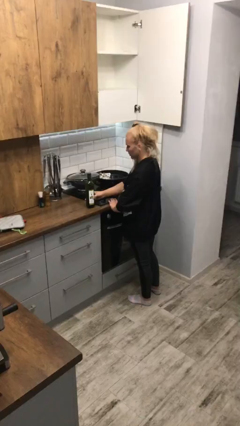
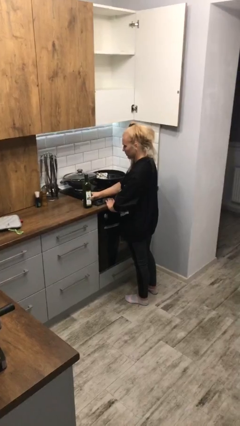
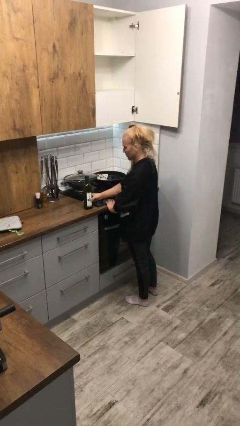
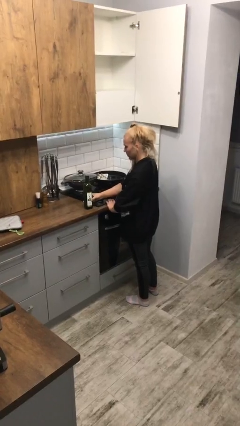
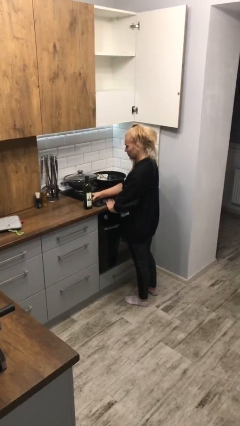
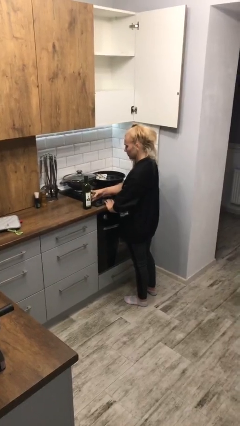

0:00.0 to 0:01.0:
person puts down object on table

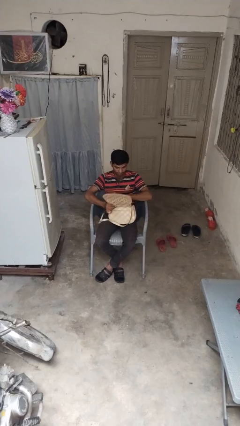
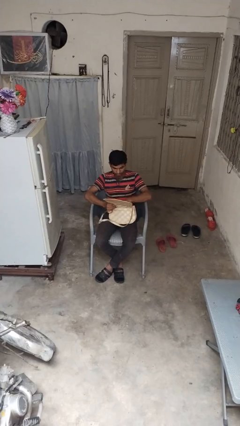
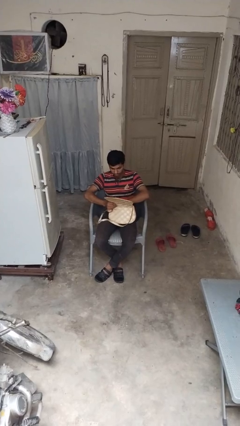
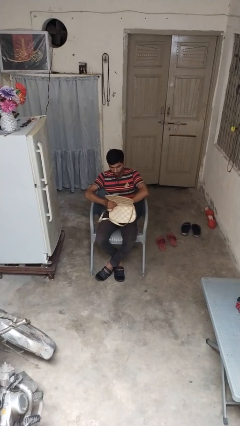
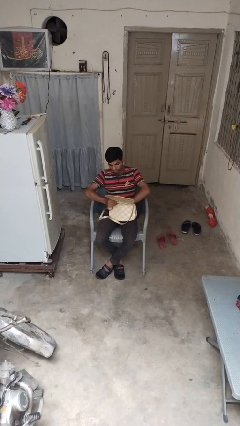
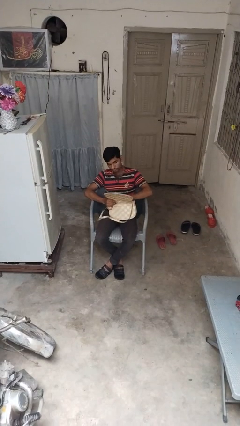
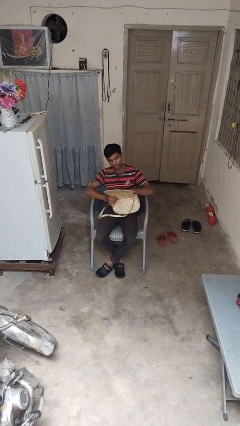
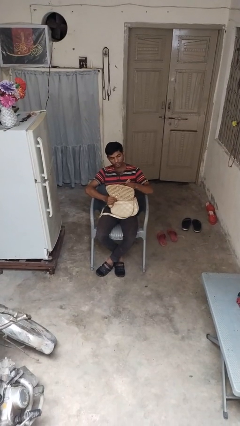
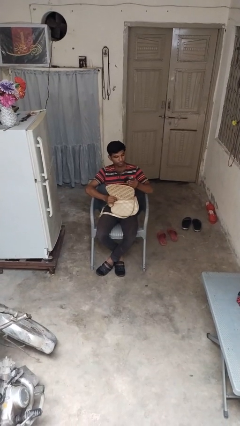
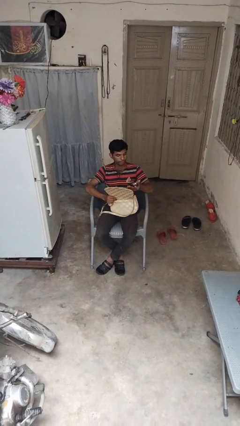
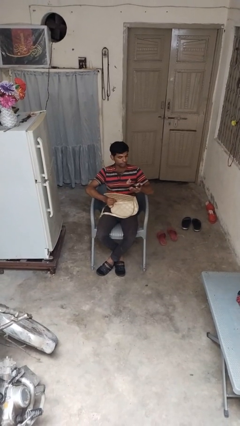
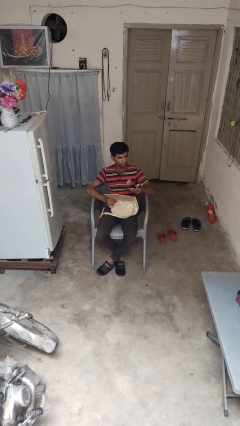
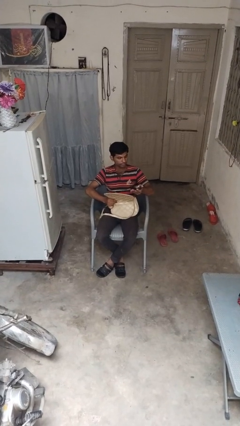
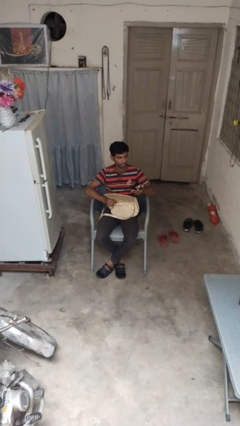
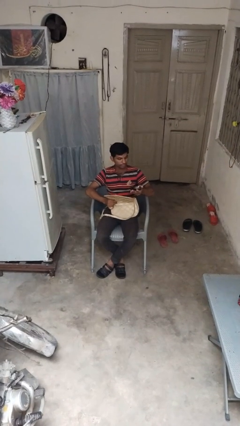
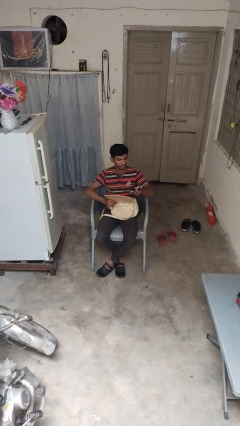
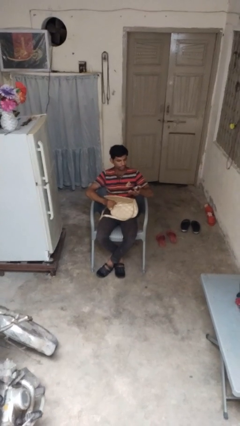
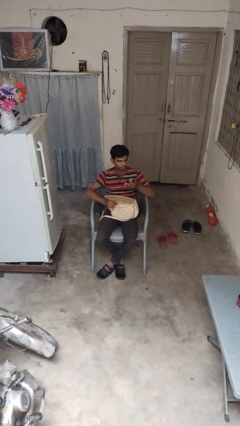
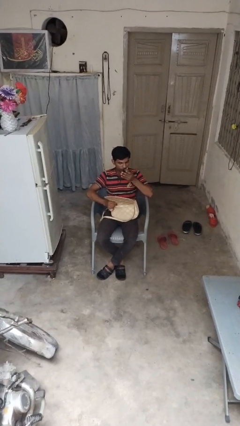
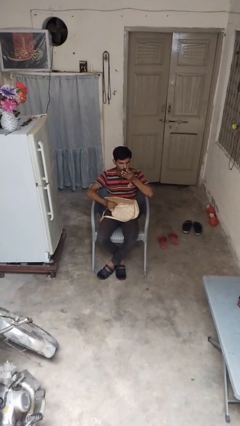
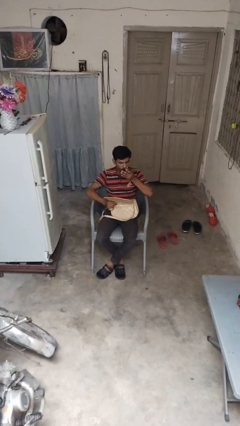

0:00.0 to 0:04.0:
person takes object from purse

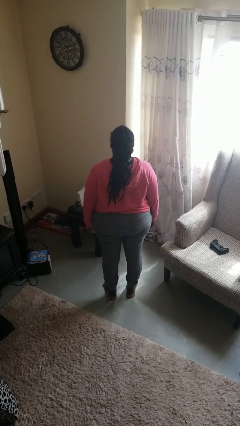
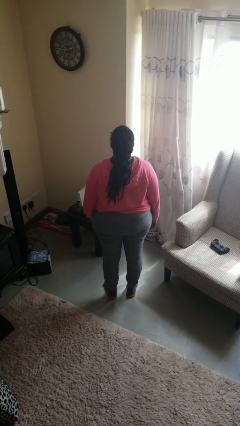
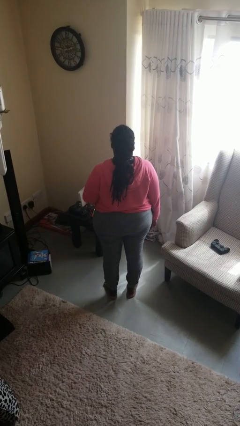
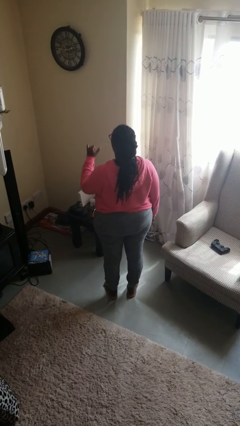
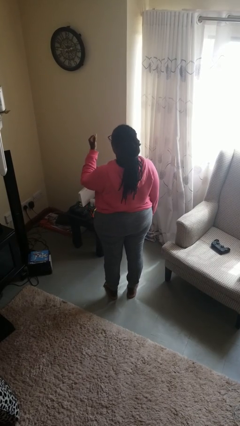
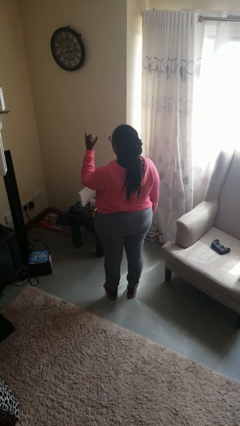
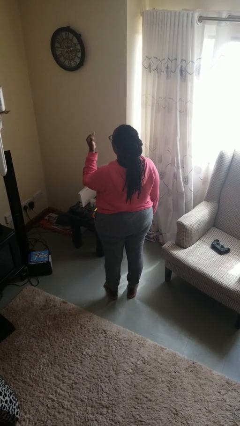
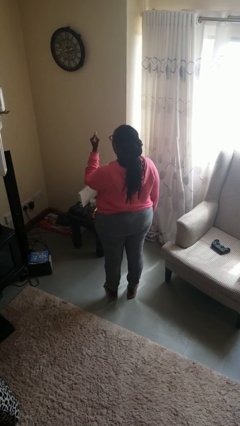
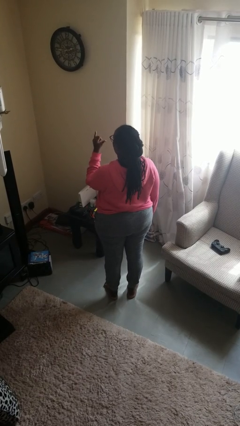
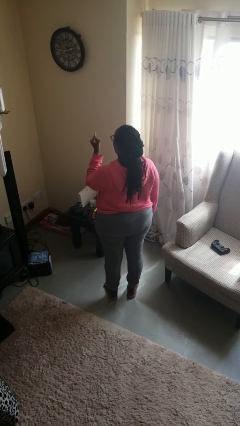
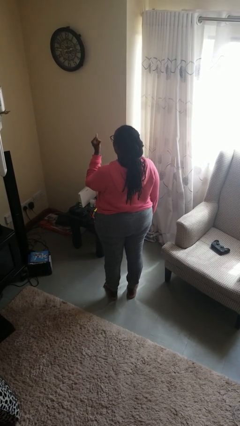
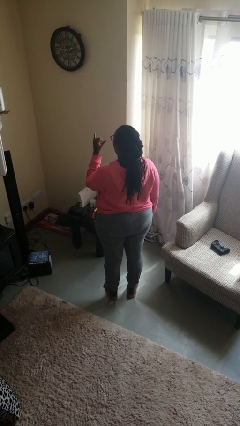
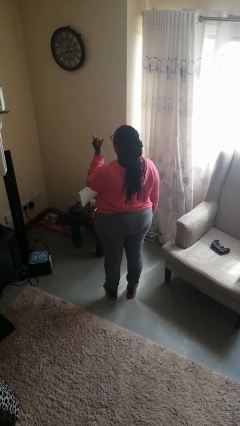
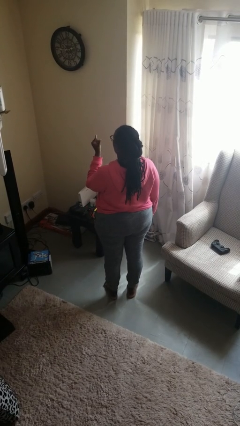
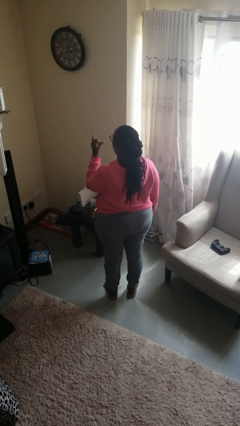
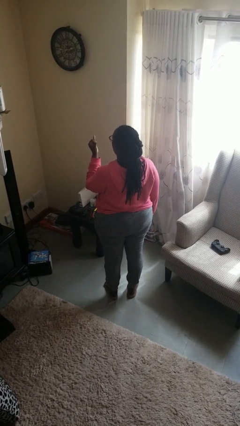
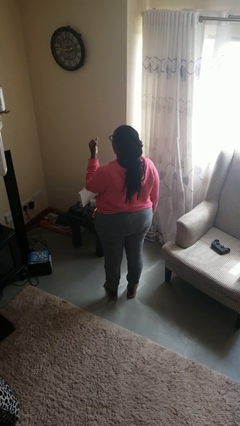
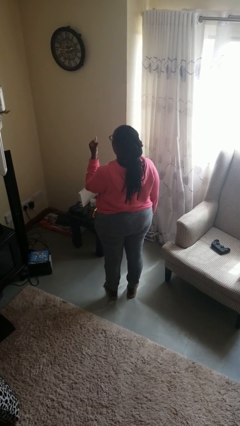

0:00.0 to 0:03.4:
person gestures hang loose

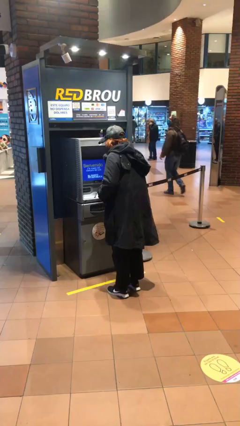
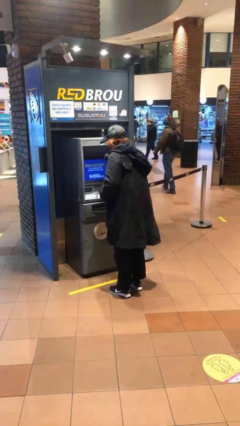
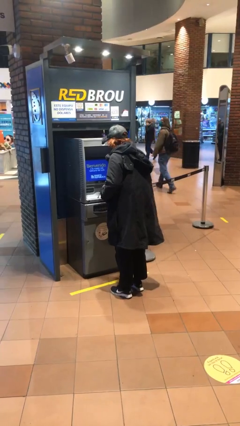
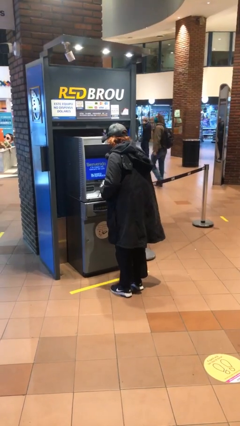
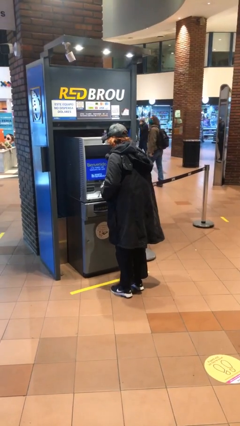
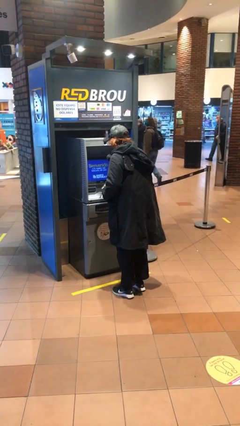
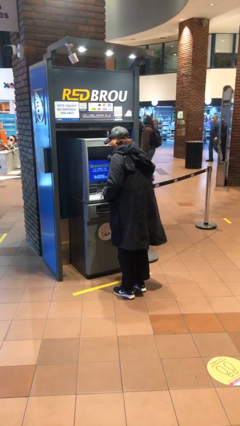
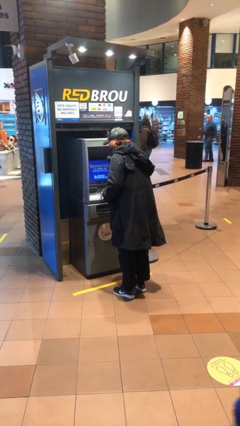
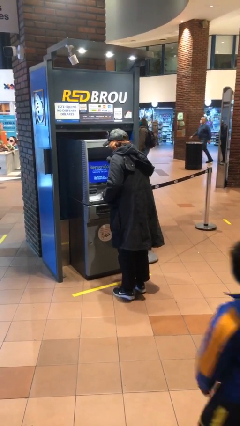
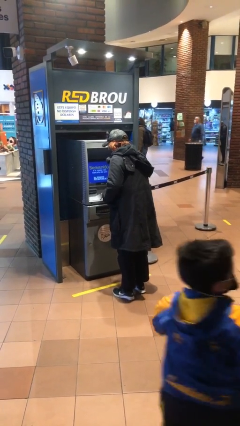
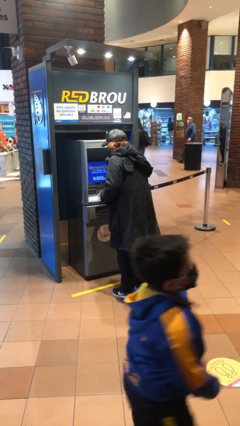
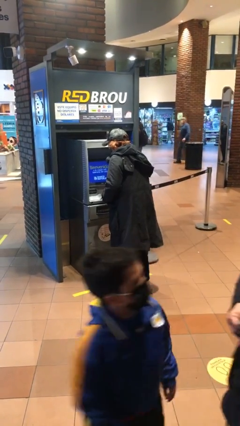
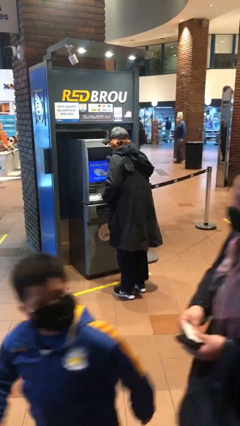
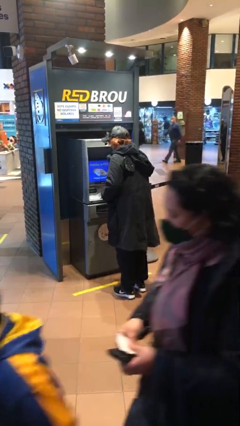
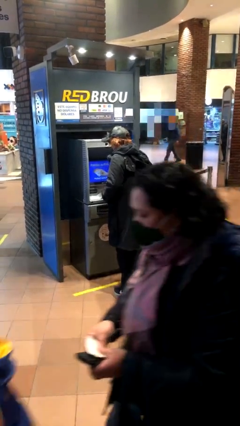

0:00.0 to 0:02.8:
person purchases from machine

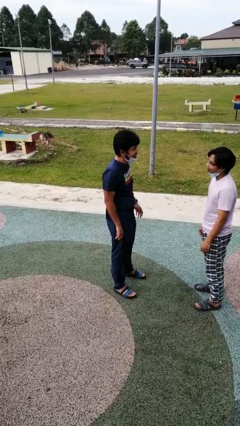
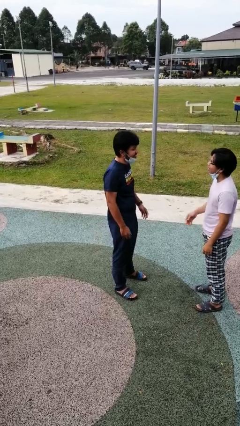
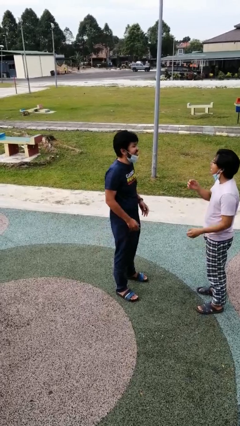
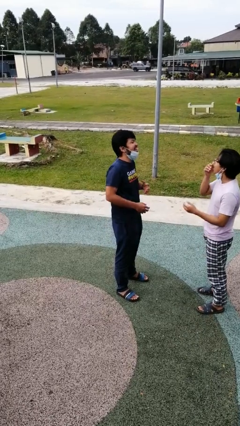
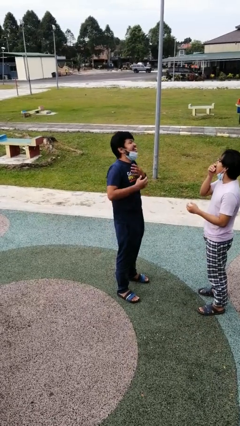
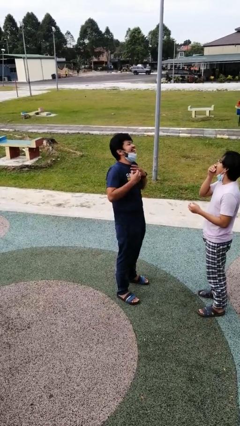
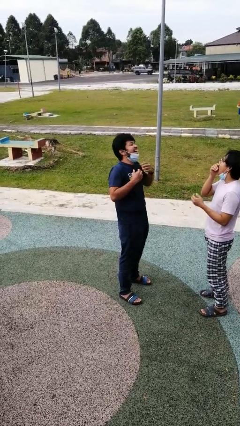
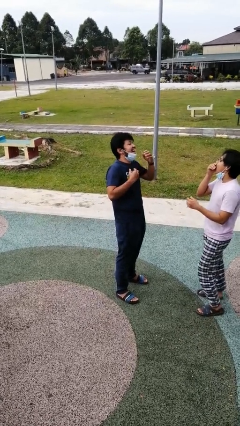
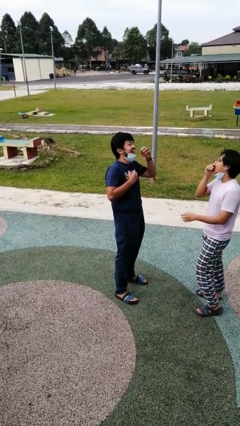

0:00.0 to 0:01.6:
person laughs with person

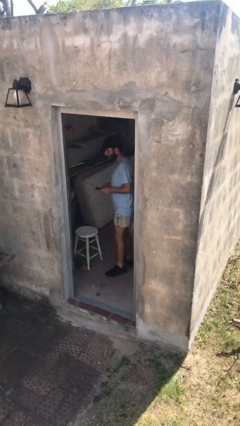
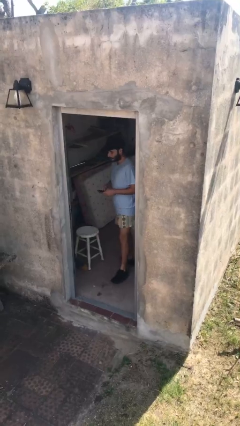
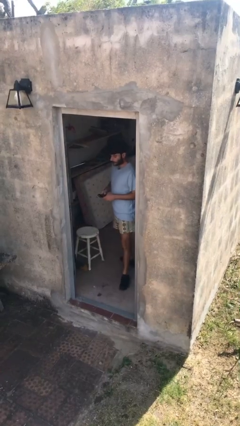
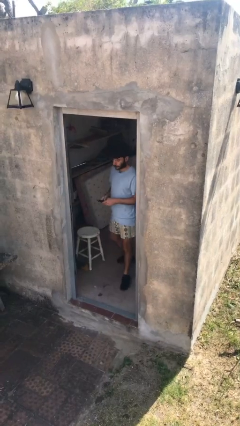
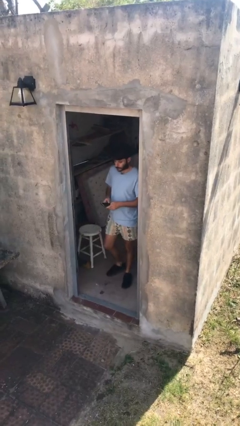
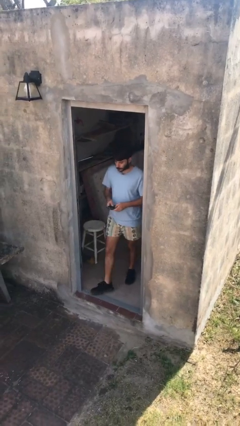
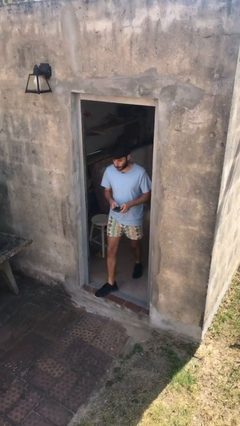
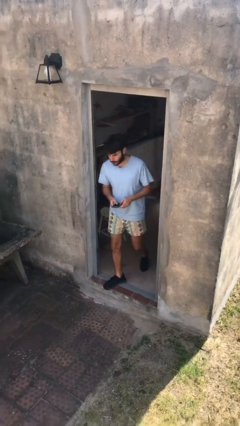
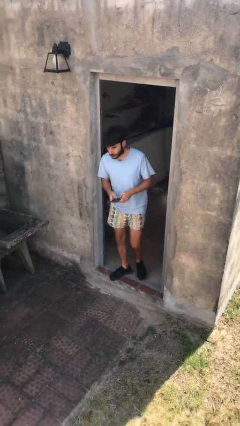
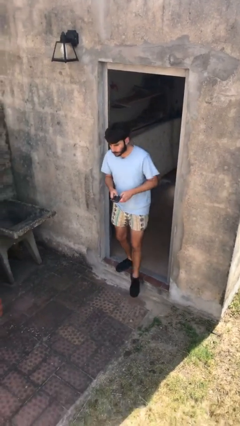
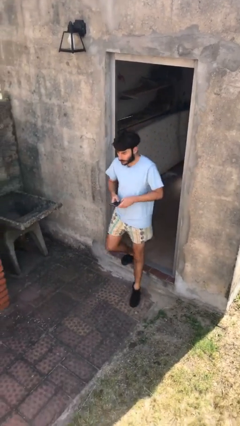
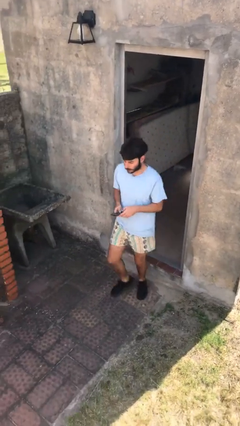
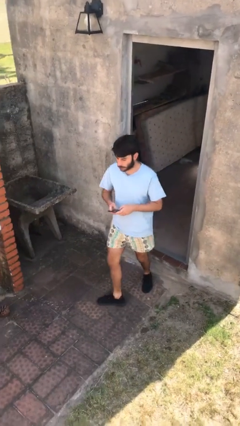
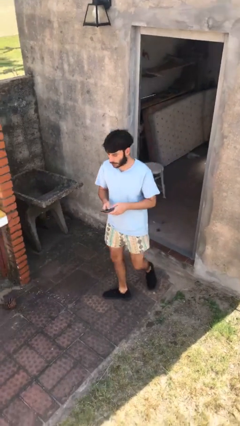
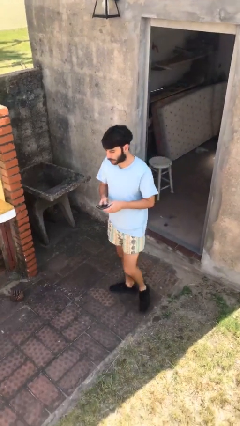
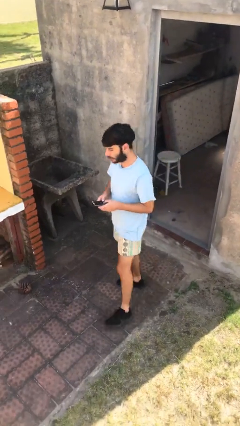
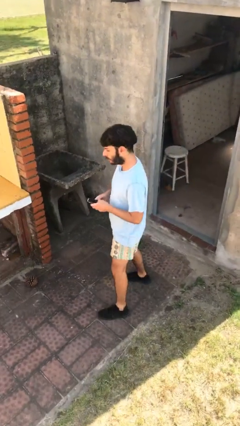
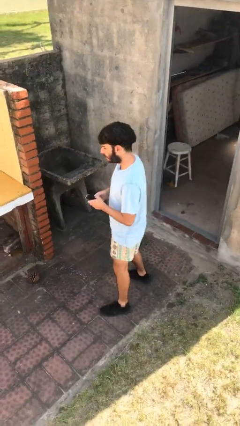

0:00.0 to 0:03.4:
person enters scene through structure

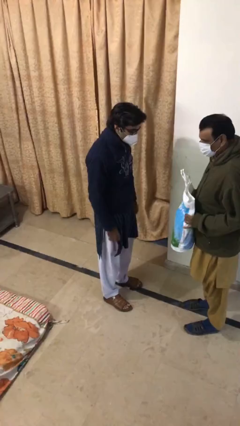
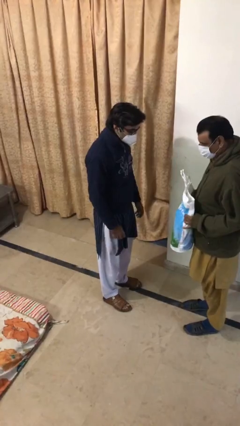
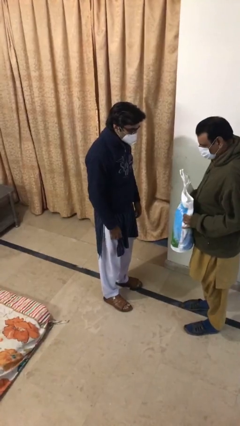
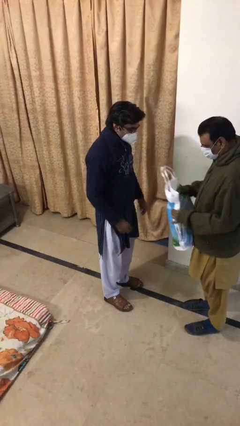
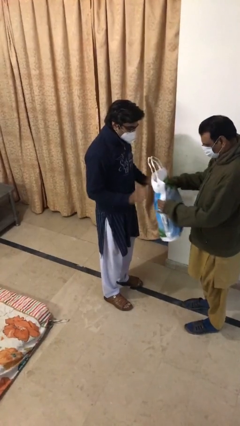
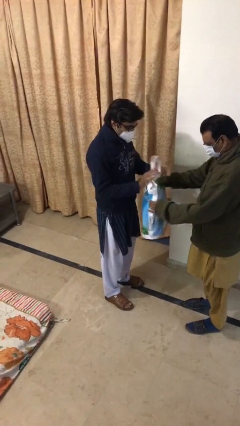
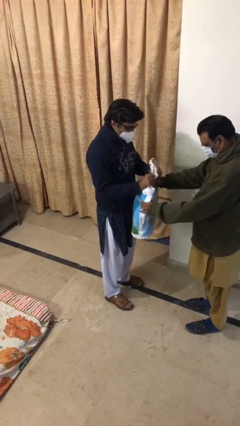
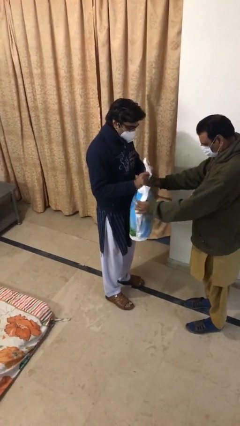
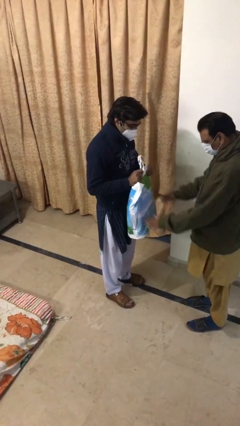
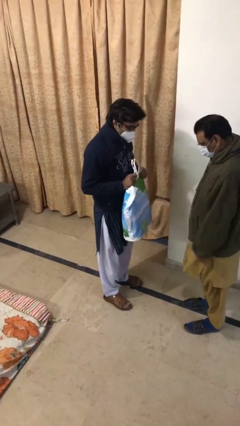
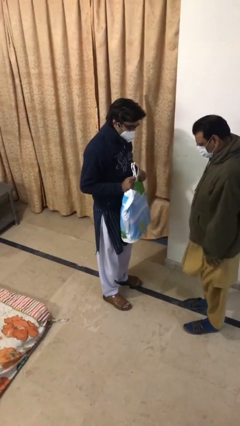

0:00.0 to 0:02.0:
person transfers object to person
